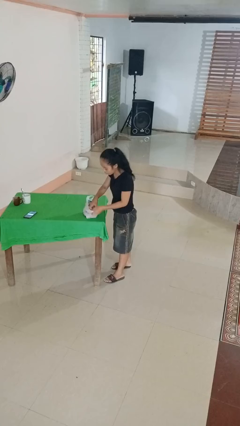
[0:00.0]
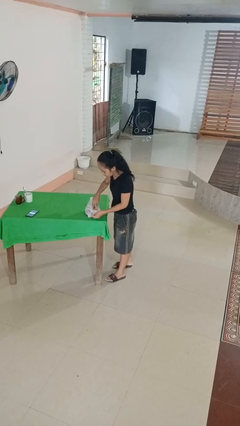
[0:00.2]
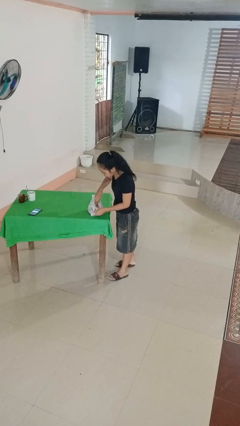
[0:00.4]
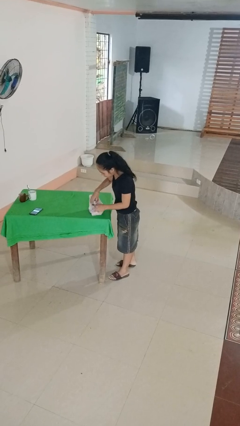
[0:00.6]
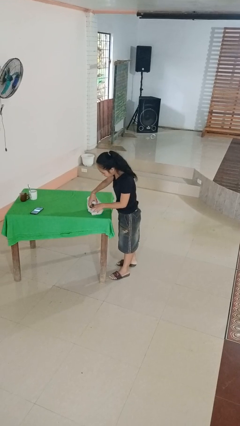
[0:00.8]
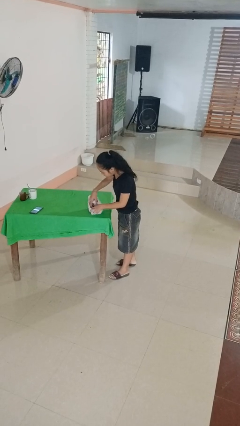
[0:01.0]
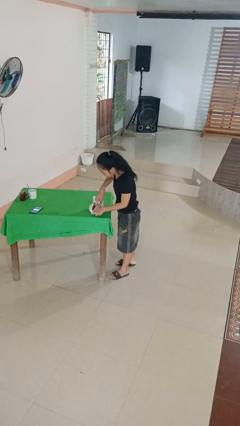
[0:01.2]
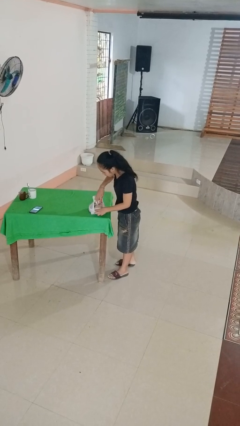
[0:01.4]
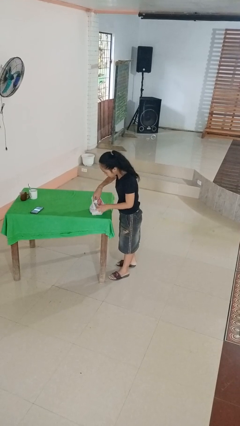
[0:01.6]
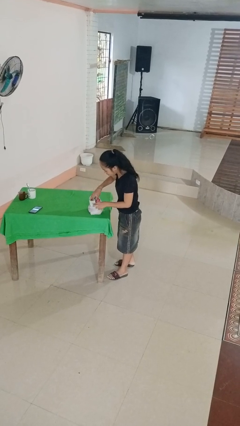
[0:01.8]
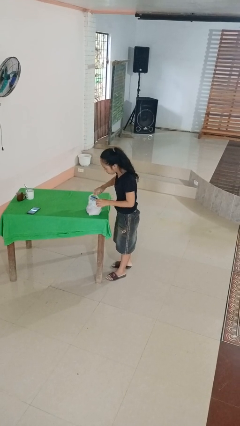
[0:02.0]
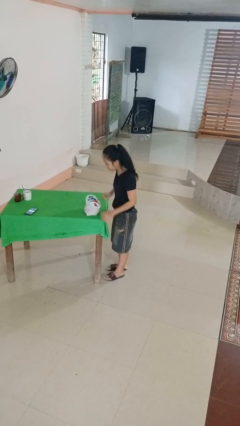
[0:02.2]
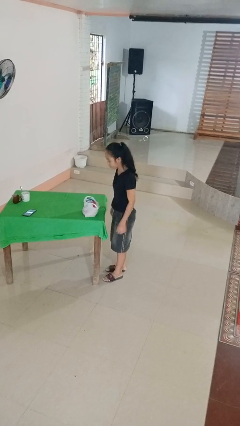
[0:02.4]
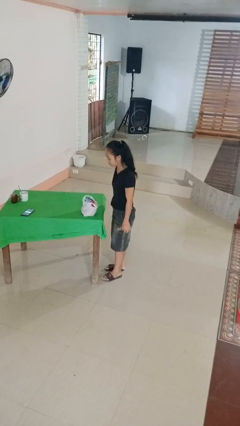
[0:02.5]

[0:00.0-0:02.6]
person searches in bag

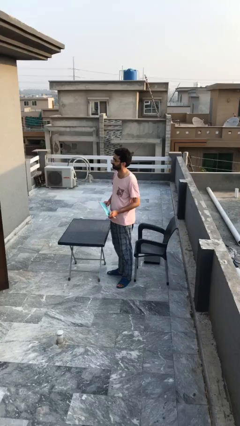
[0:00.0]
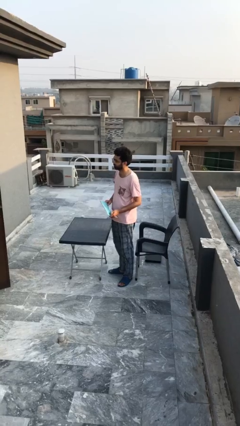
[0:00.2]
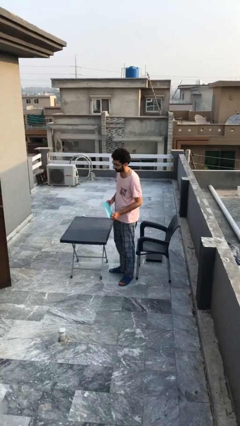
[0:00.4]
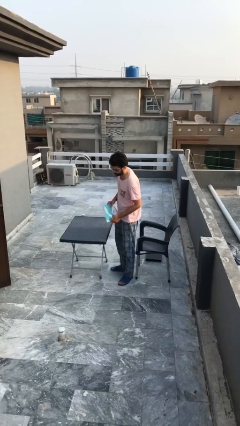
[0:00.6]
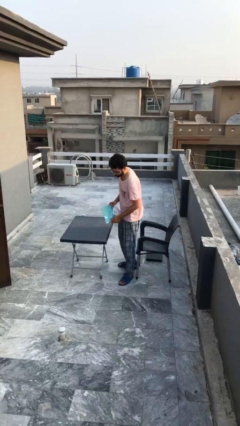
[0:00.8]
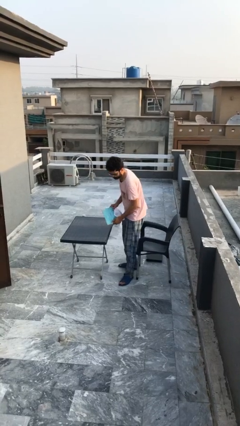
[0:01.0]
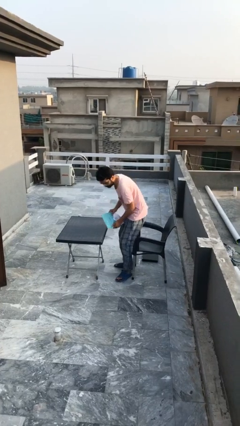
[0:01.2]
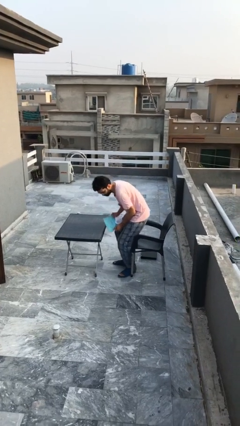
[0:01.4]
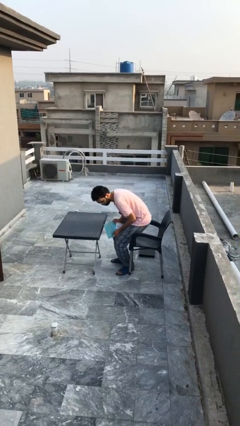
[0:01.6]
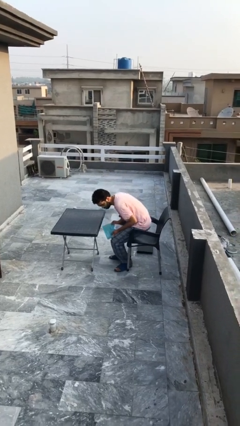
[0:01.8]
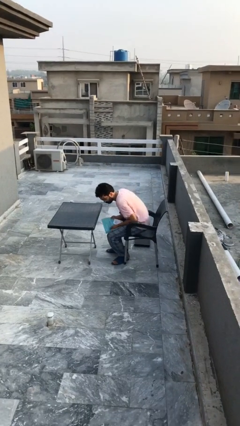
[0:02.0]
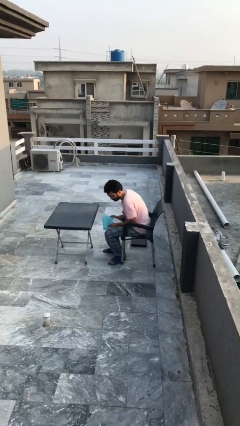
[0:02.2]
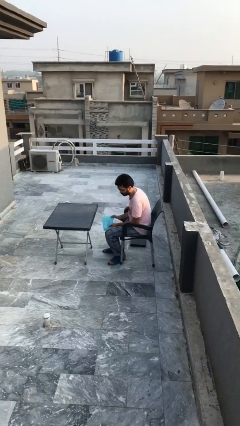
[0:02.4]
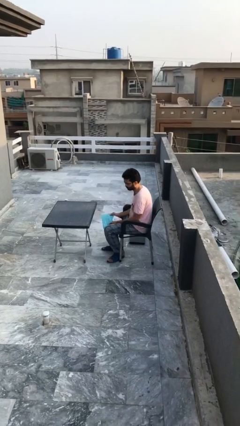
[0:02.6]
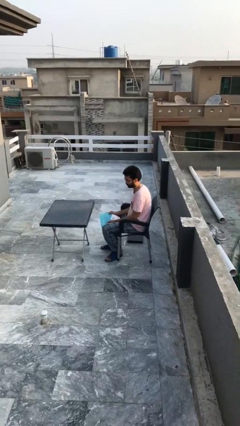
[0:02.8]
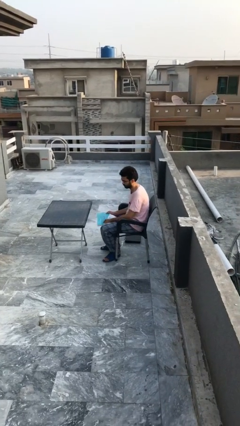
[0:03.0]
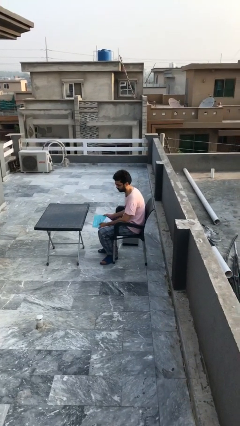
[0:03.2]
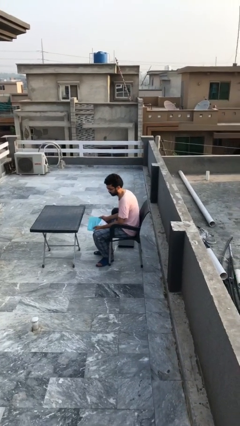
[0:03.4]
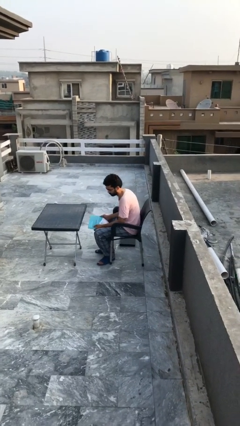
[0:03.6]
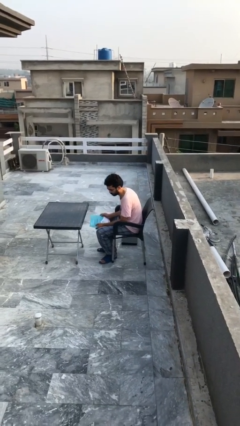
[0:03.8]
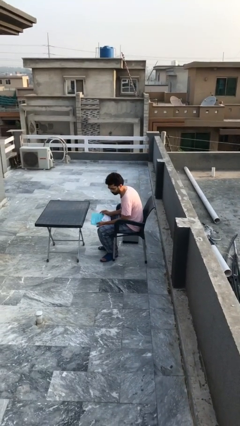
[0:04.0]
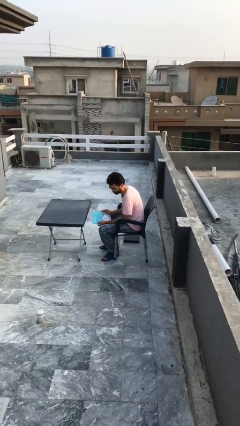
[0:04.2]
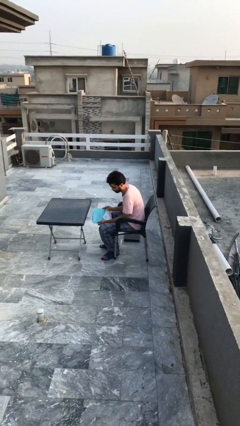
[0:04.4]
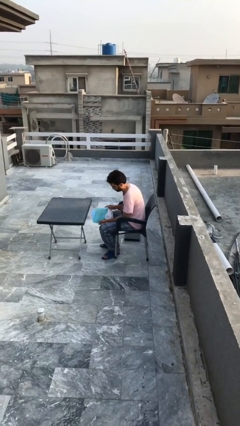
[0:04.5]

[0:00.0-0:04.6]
person sits down

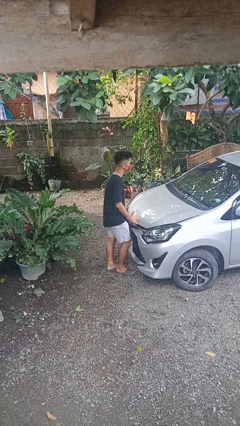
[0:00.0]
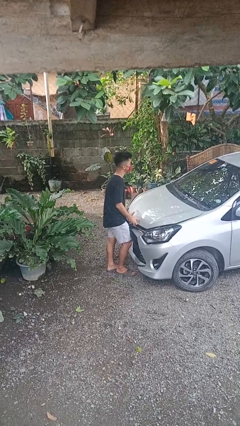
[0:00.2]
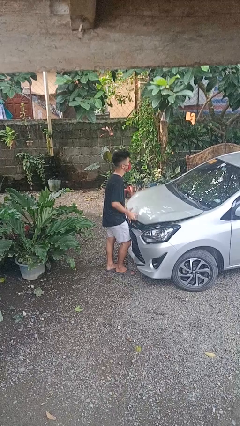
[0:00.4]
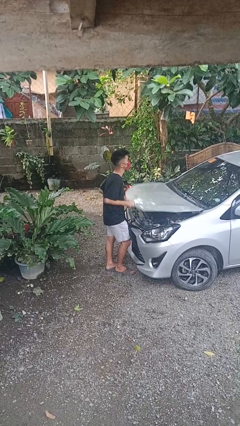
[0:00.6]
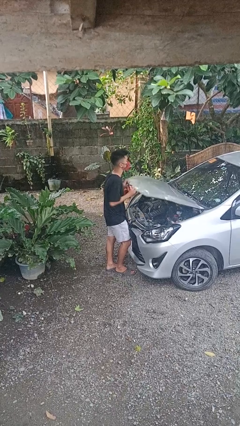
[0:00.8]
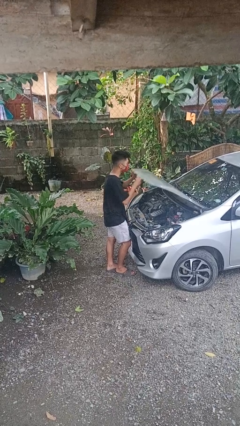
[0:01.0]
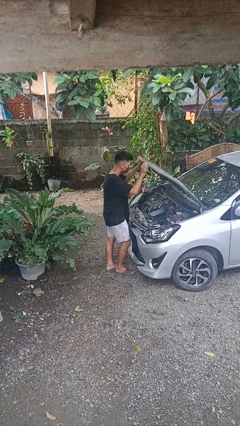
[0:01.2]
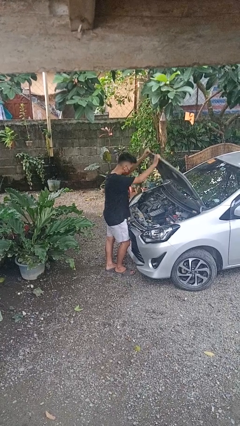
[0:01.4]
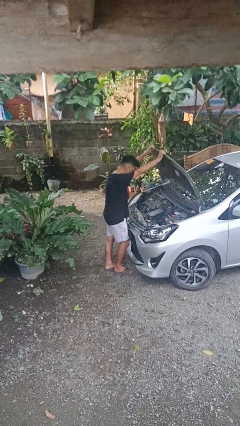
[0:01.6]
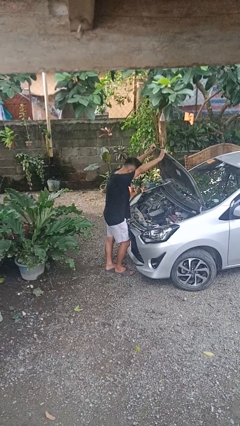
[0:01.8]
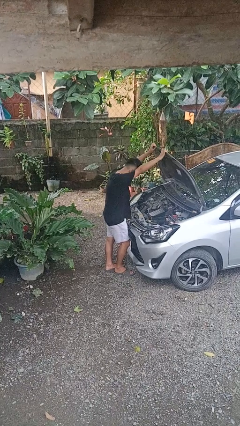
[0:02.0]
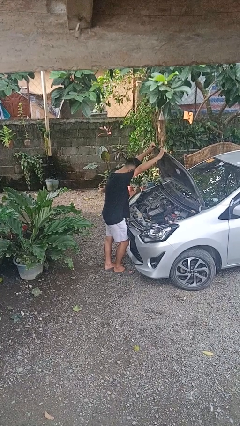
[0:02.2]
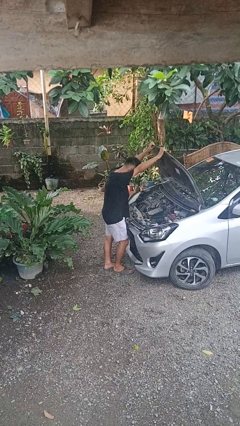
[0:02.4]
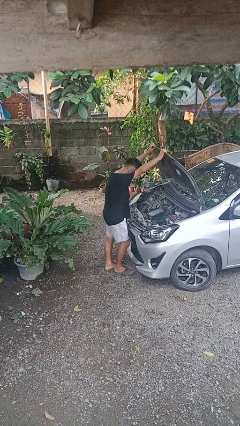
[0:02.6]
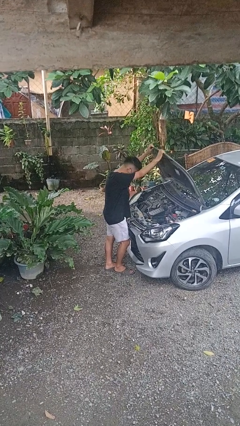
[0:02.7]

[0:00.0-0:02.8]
person opens car hood

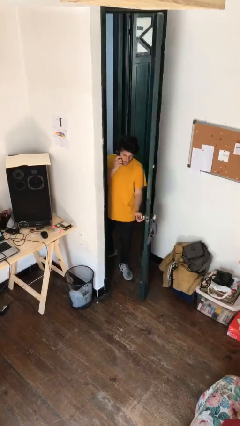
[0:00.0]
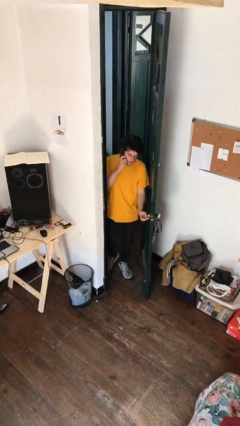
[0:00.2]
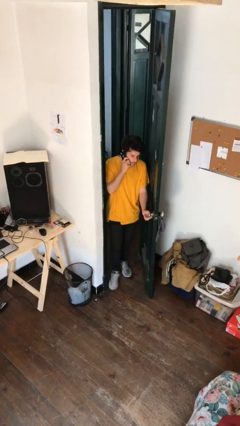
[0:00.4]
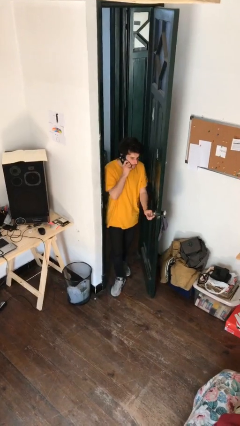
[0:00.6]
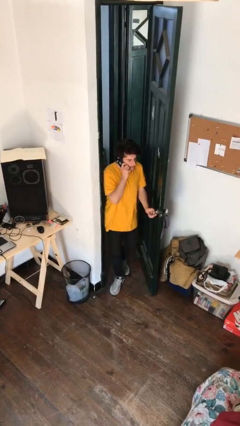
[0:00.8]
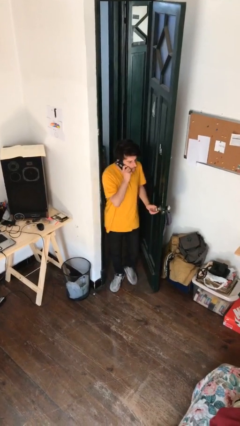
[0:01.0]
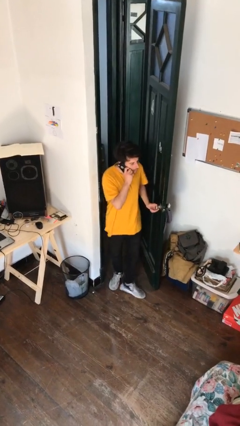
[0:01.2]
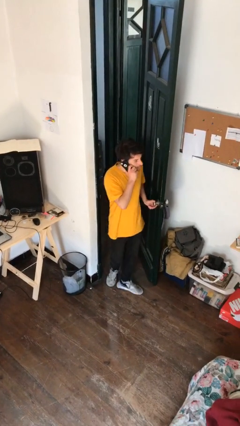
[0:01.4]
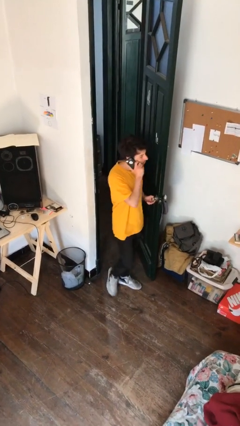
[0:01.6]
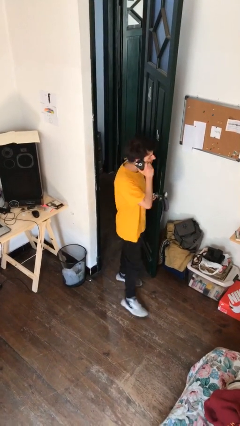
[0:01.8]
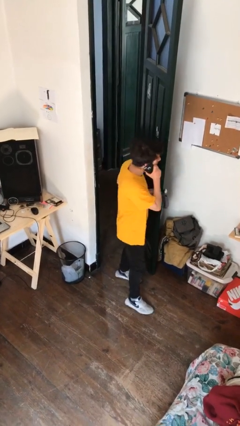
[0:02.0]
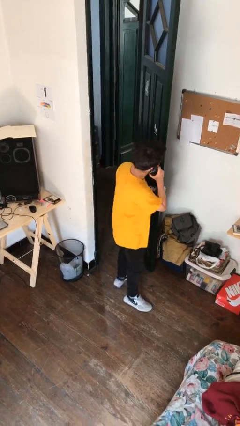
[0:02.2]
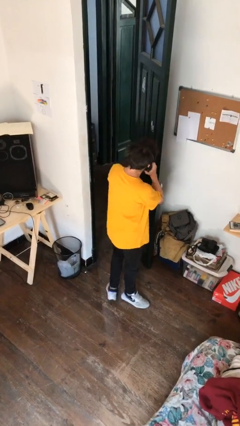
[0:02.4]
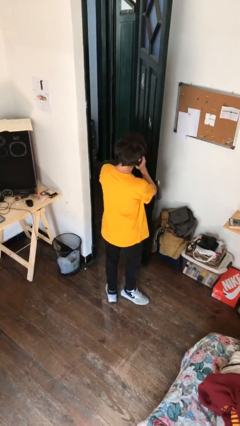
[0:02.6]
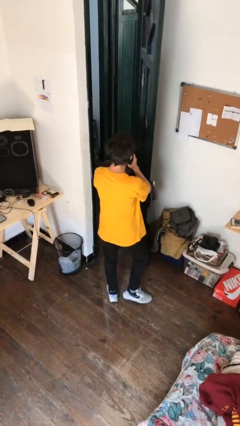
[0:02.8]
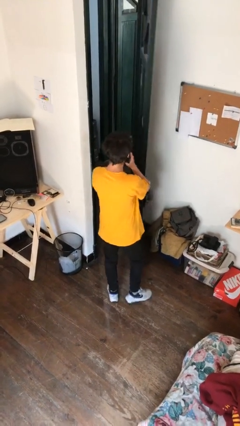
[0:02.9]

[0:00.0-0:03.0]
person enters scene through structure

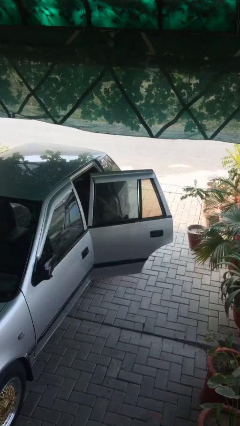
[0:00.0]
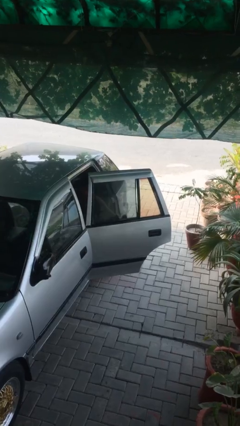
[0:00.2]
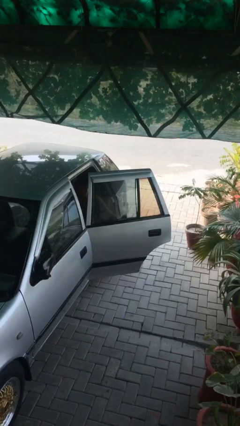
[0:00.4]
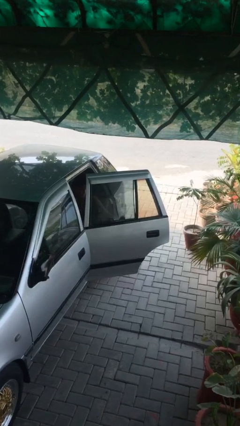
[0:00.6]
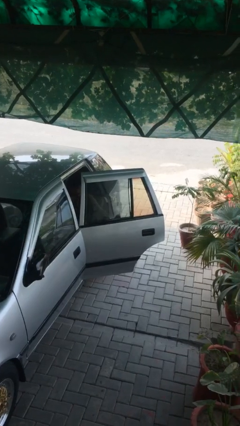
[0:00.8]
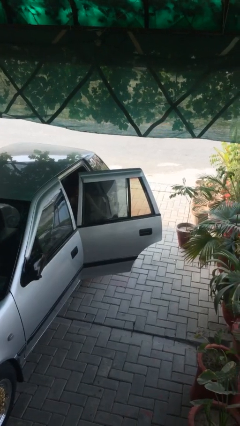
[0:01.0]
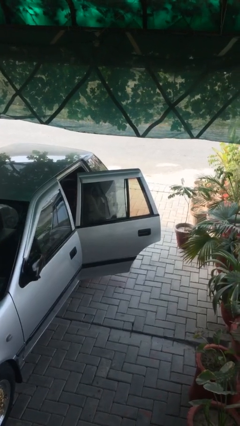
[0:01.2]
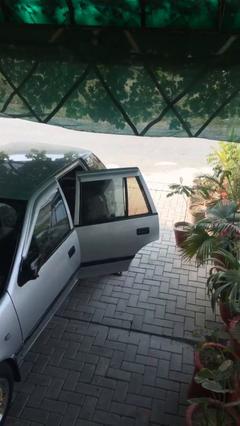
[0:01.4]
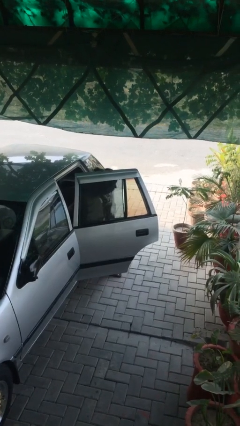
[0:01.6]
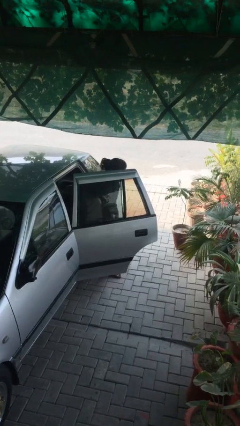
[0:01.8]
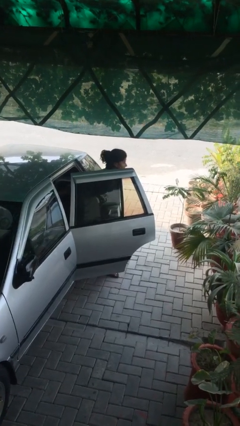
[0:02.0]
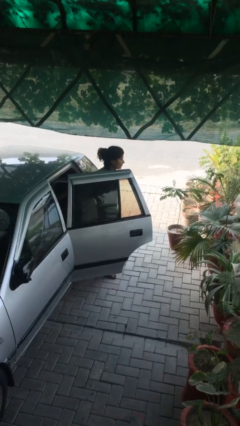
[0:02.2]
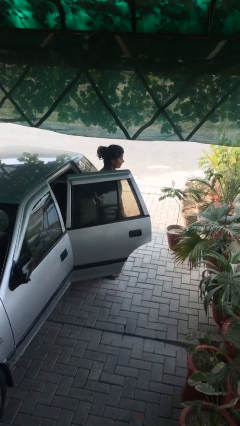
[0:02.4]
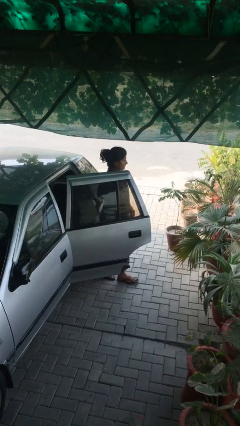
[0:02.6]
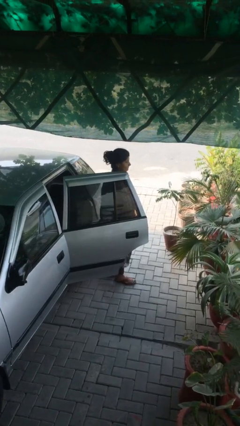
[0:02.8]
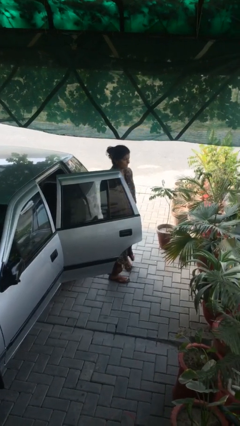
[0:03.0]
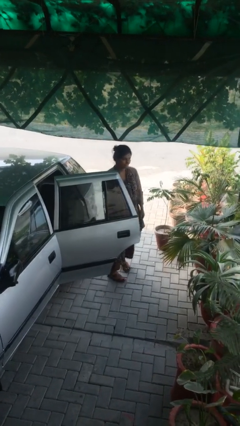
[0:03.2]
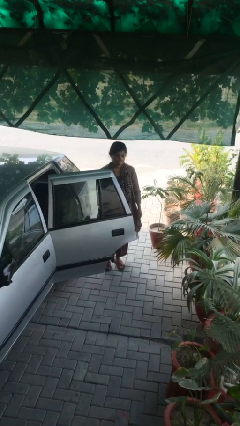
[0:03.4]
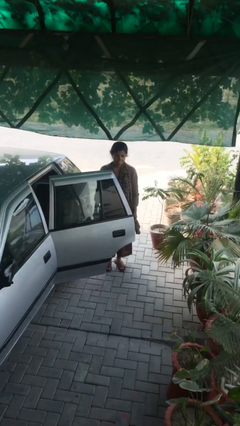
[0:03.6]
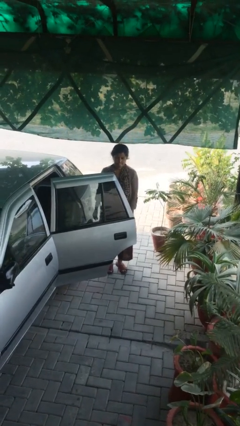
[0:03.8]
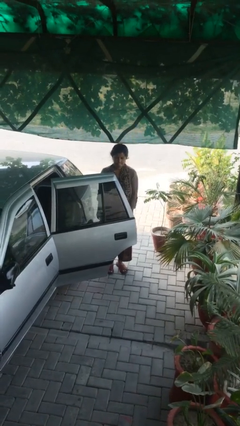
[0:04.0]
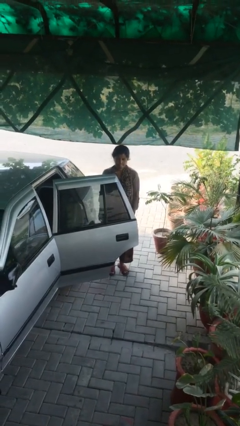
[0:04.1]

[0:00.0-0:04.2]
person exits car

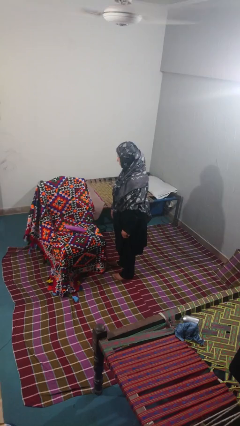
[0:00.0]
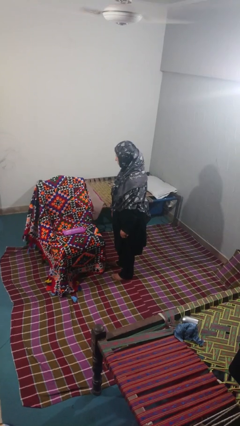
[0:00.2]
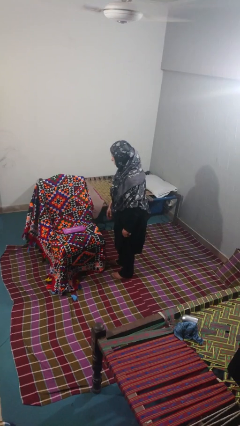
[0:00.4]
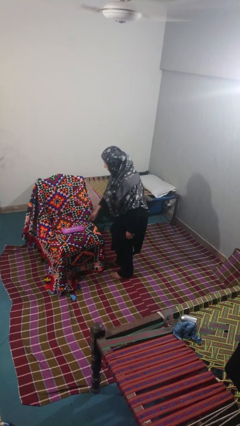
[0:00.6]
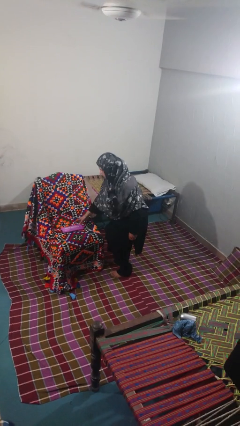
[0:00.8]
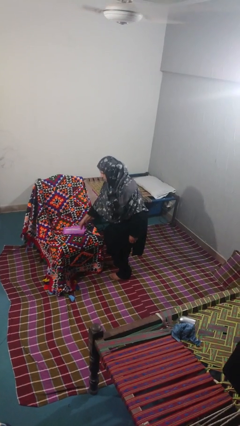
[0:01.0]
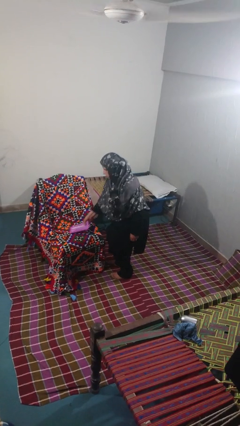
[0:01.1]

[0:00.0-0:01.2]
person picks up object from couch
